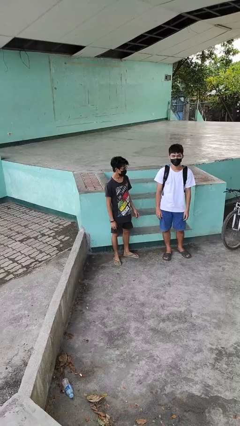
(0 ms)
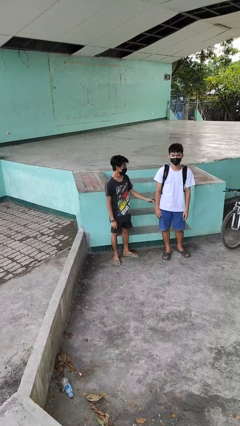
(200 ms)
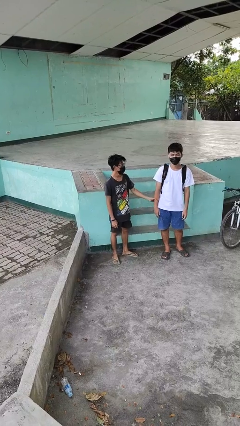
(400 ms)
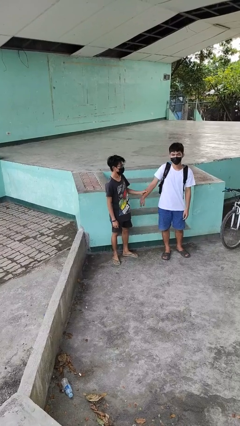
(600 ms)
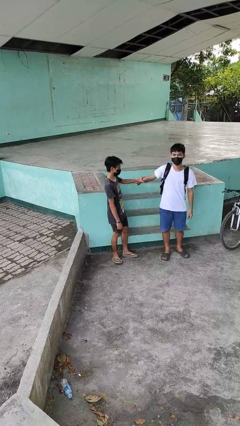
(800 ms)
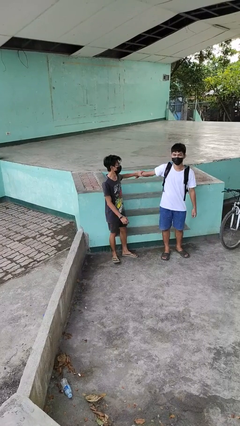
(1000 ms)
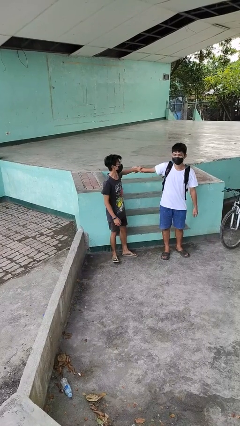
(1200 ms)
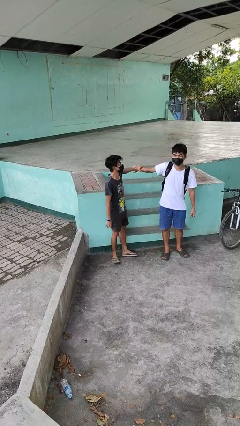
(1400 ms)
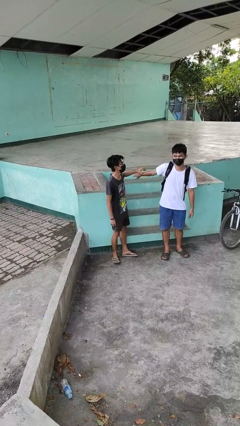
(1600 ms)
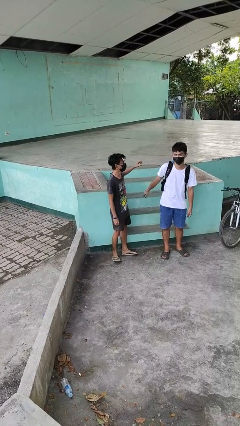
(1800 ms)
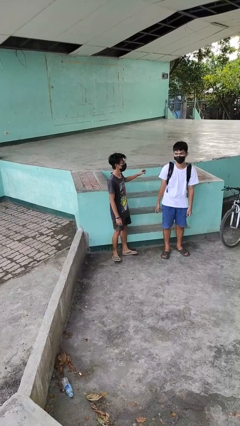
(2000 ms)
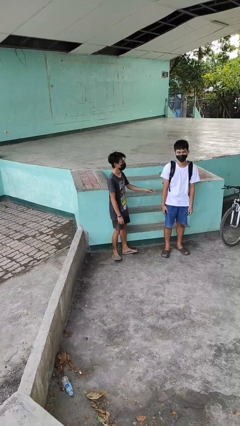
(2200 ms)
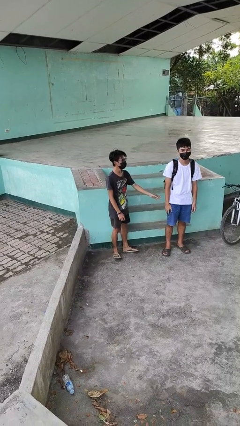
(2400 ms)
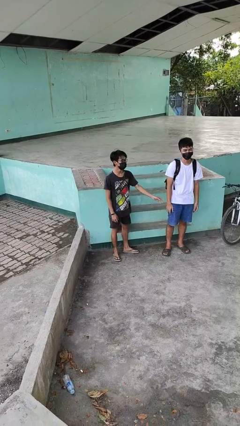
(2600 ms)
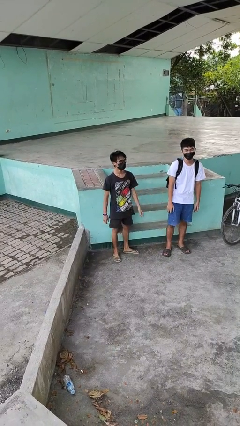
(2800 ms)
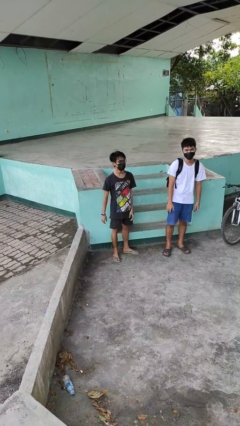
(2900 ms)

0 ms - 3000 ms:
person grabs person by forearm

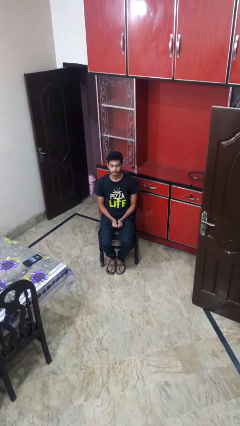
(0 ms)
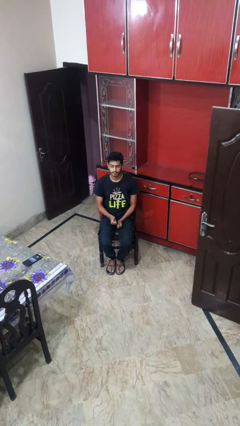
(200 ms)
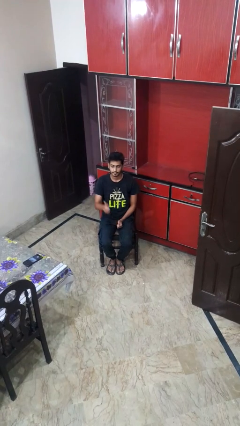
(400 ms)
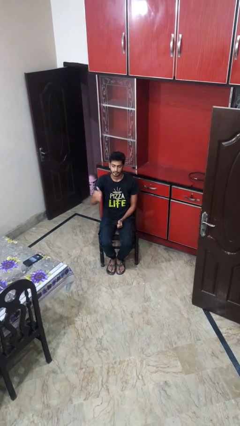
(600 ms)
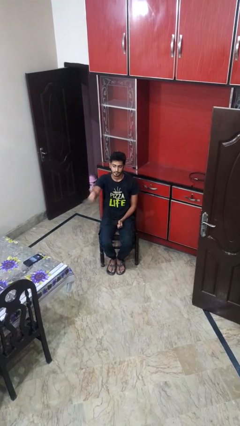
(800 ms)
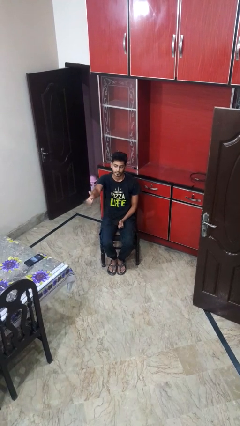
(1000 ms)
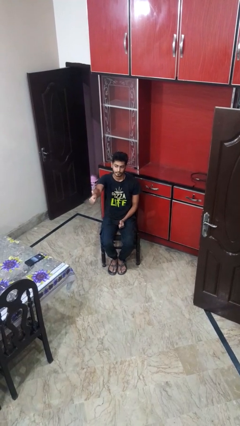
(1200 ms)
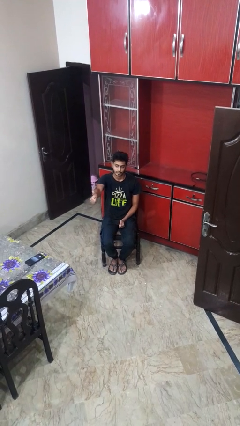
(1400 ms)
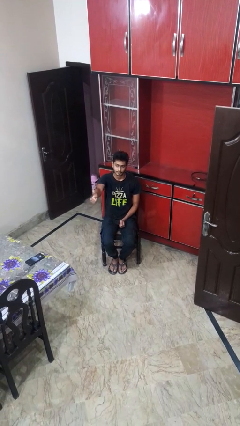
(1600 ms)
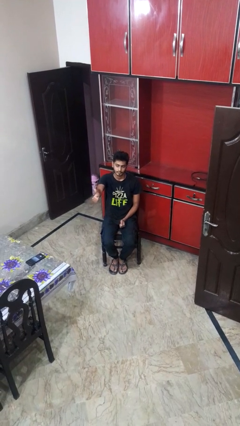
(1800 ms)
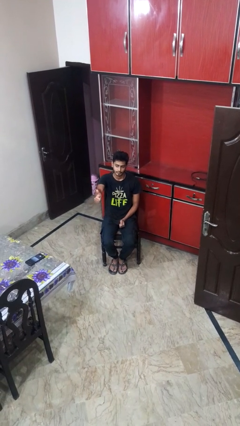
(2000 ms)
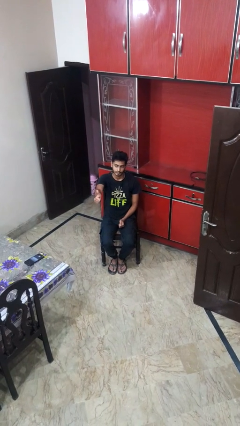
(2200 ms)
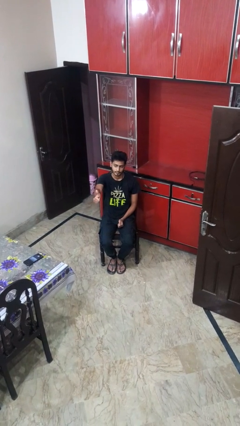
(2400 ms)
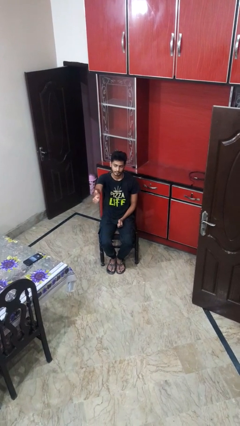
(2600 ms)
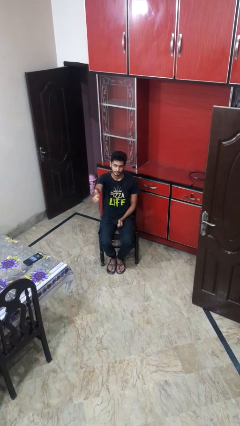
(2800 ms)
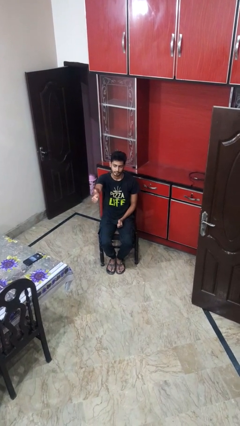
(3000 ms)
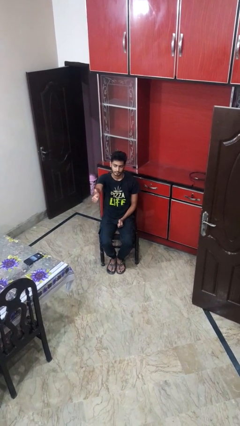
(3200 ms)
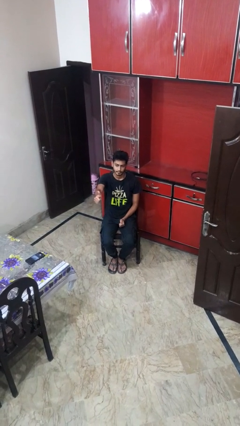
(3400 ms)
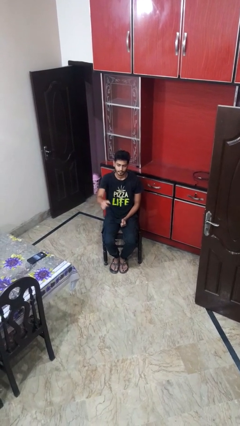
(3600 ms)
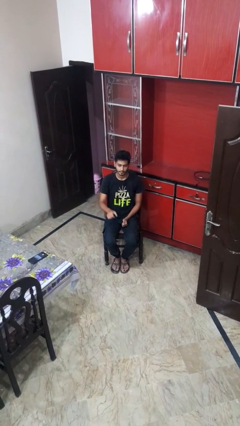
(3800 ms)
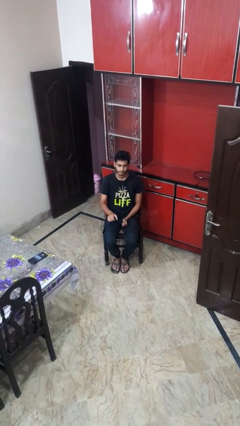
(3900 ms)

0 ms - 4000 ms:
person gestures thumbs up

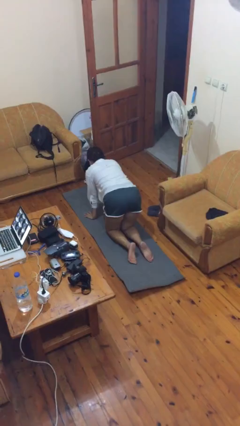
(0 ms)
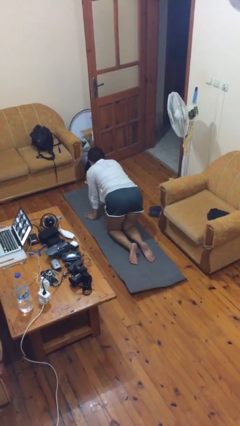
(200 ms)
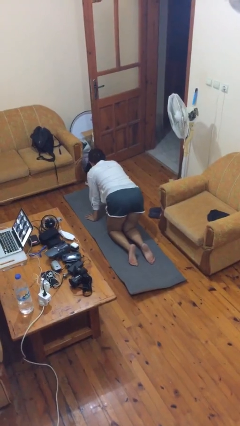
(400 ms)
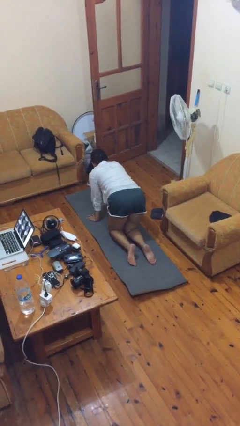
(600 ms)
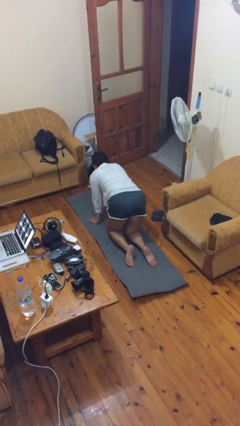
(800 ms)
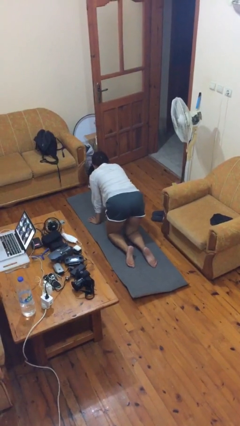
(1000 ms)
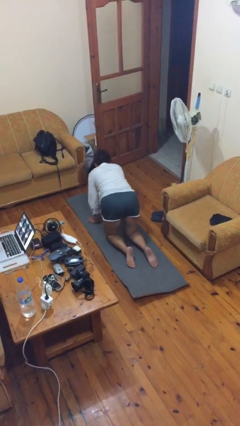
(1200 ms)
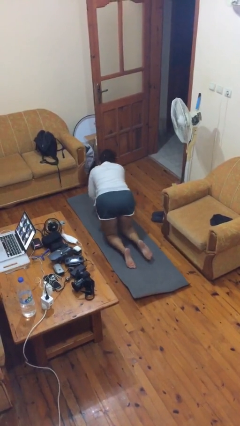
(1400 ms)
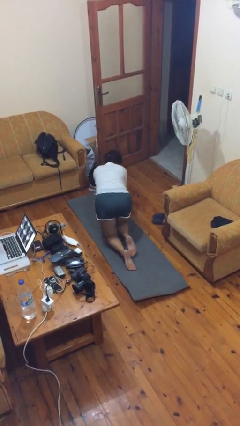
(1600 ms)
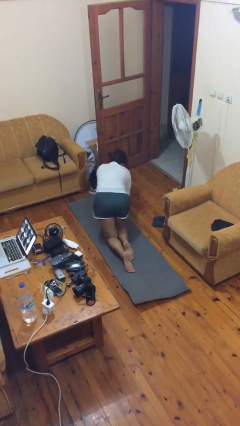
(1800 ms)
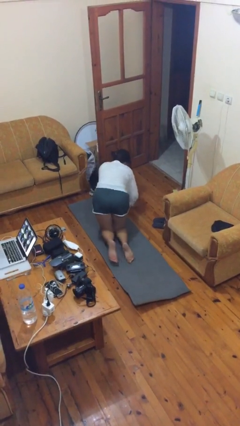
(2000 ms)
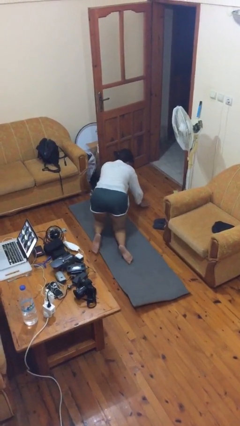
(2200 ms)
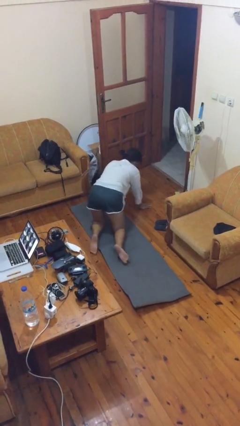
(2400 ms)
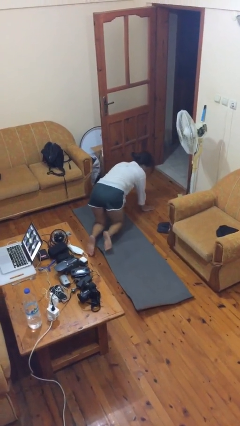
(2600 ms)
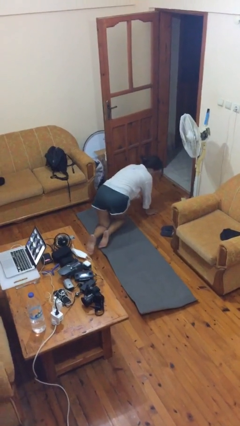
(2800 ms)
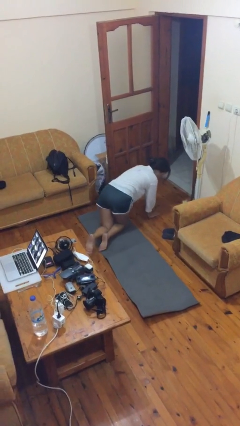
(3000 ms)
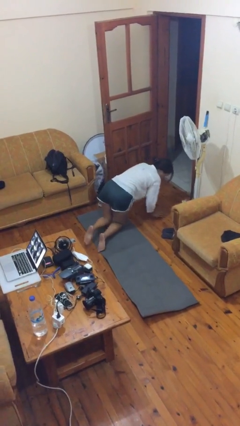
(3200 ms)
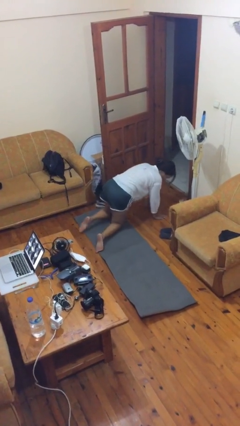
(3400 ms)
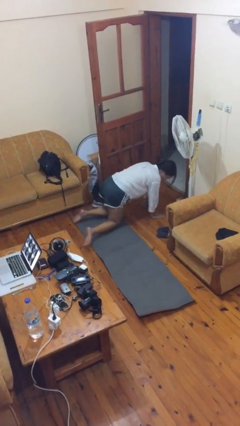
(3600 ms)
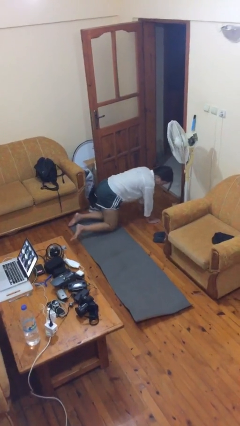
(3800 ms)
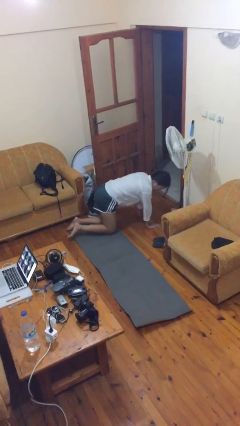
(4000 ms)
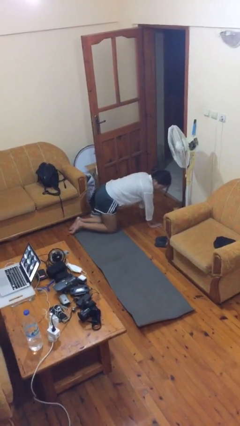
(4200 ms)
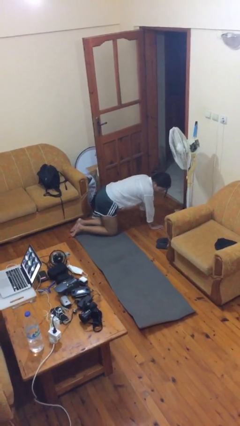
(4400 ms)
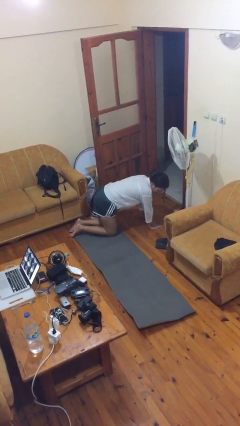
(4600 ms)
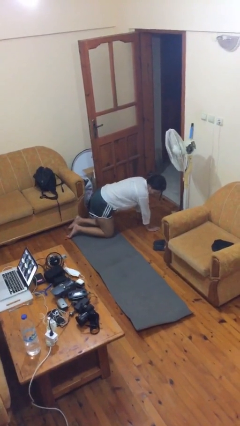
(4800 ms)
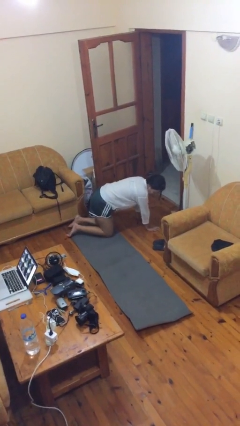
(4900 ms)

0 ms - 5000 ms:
person crawls

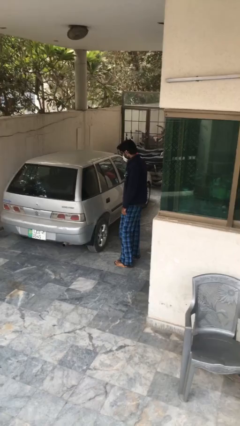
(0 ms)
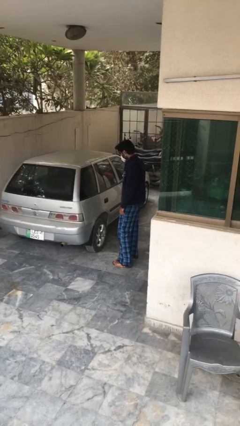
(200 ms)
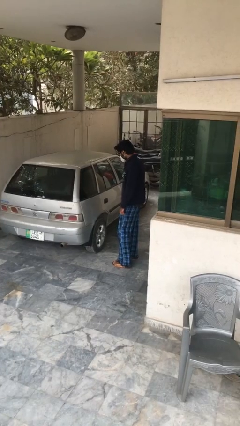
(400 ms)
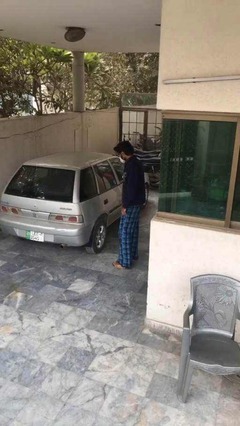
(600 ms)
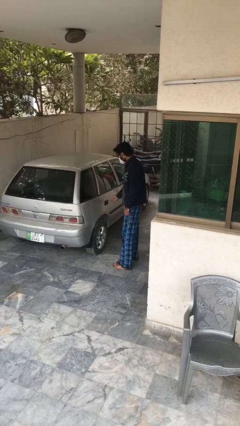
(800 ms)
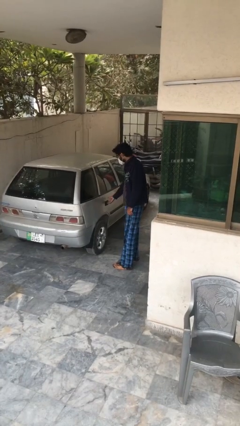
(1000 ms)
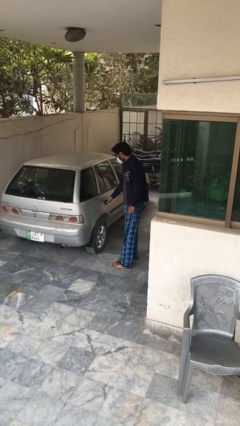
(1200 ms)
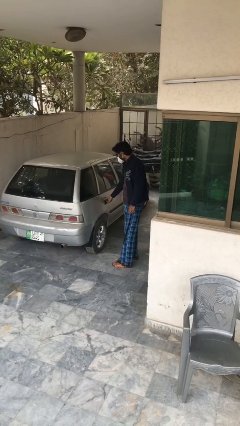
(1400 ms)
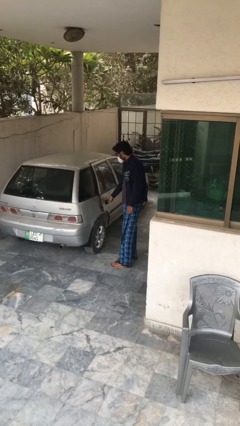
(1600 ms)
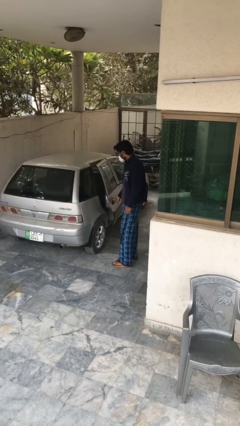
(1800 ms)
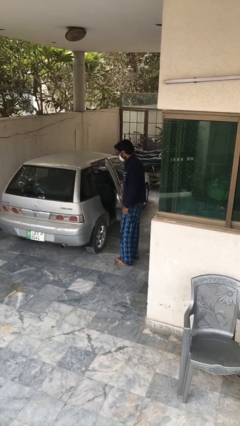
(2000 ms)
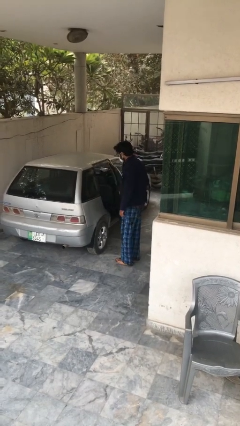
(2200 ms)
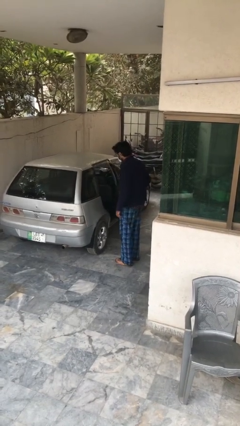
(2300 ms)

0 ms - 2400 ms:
person opens car door

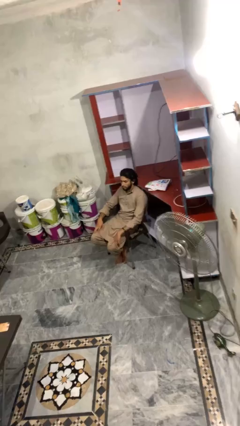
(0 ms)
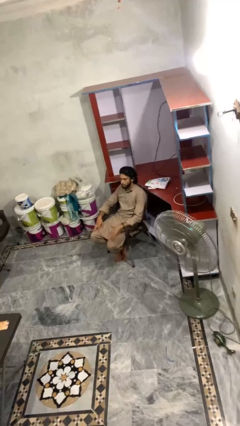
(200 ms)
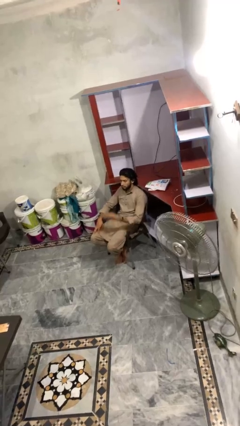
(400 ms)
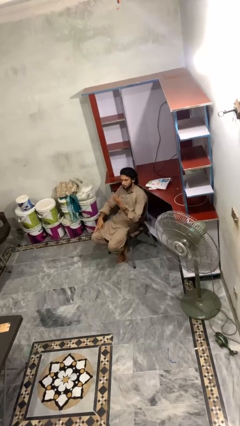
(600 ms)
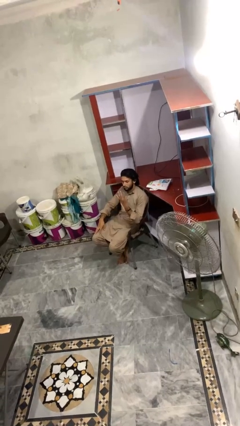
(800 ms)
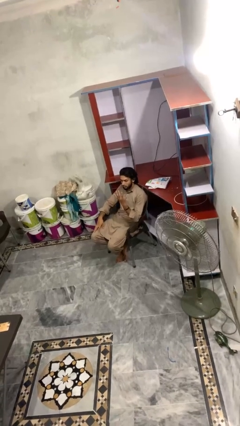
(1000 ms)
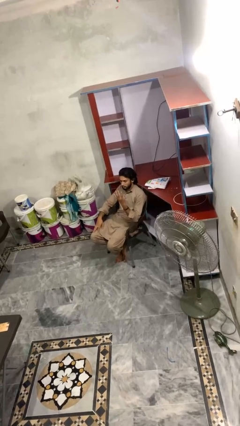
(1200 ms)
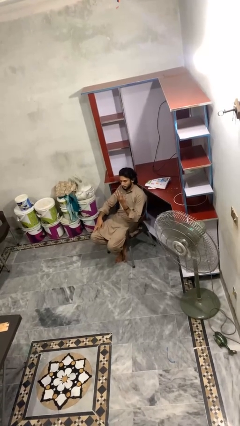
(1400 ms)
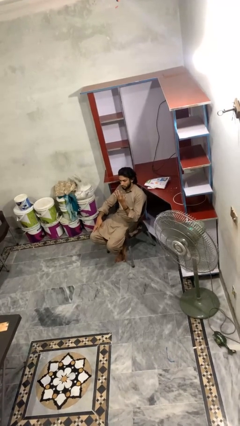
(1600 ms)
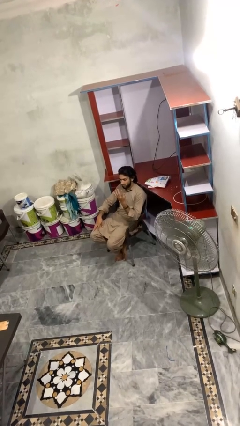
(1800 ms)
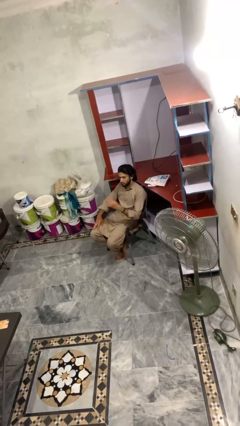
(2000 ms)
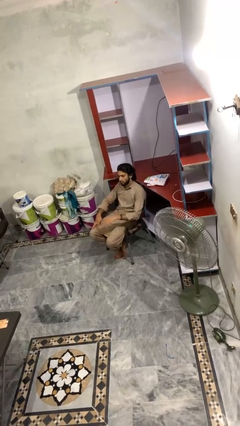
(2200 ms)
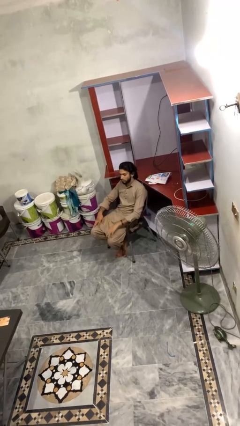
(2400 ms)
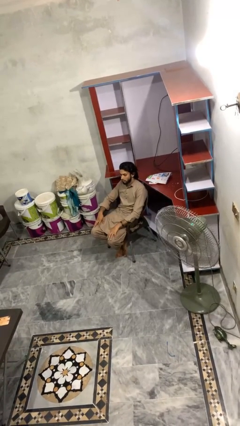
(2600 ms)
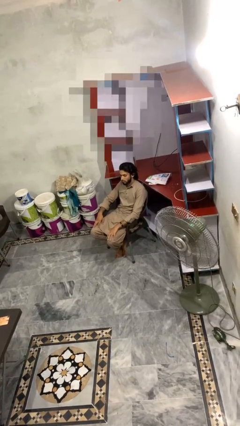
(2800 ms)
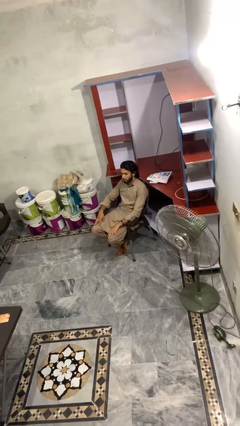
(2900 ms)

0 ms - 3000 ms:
person gestures number four

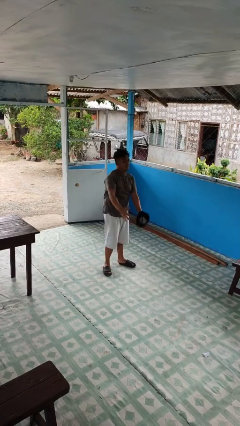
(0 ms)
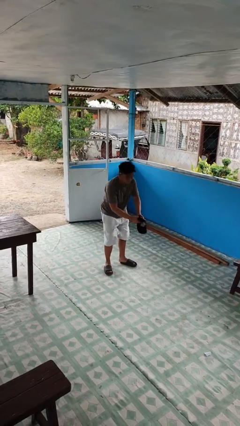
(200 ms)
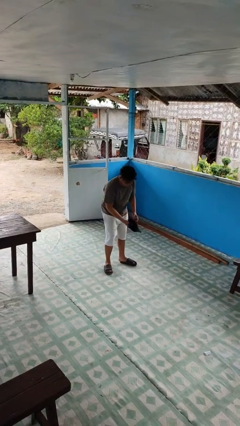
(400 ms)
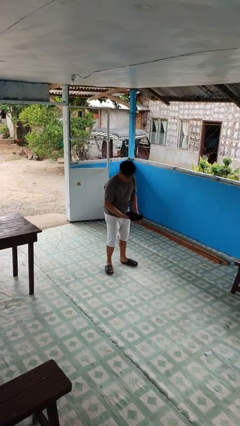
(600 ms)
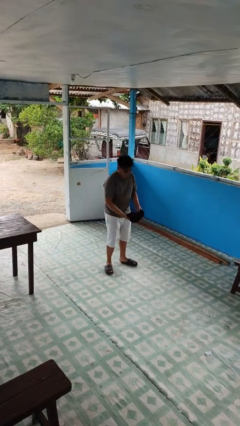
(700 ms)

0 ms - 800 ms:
person catches dropped object
